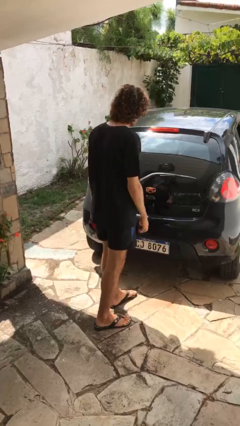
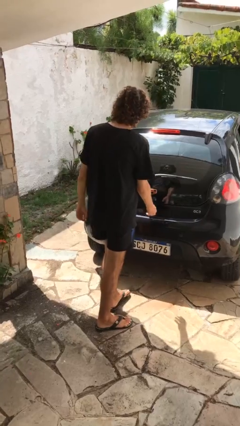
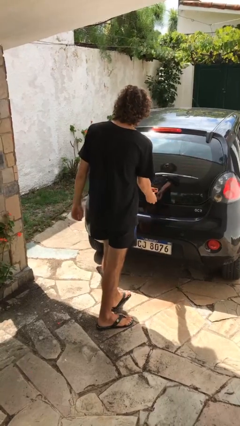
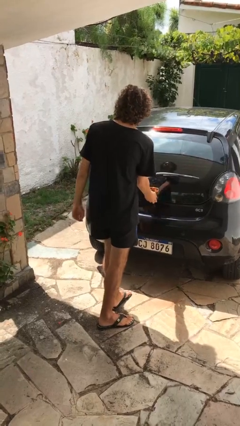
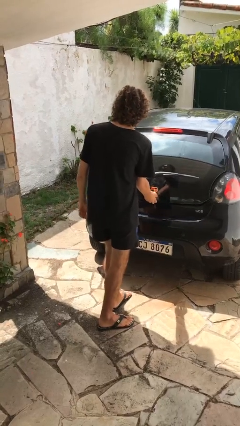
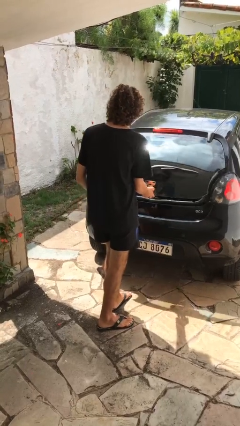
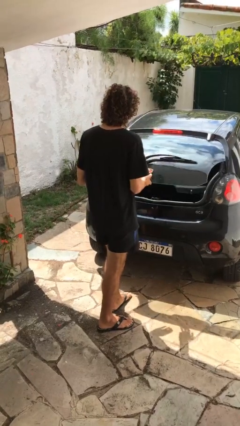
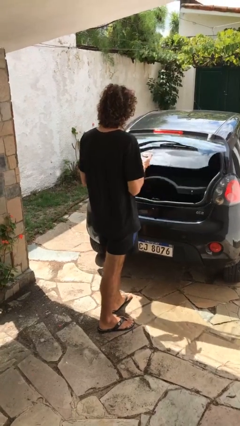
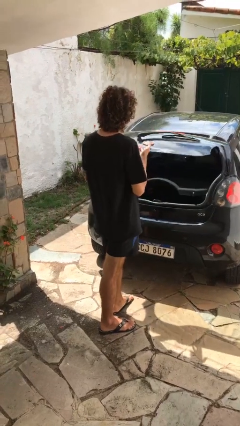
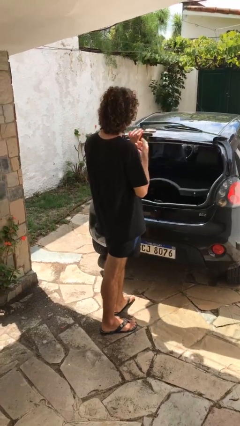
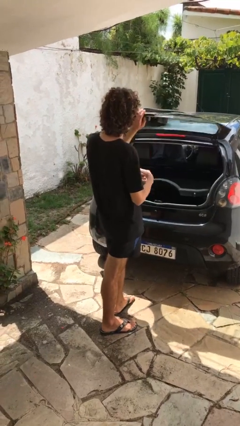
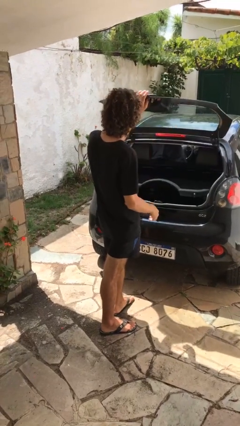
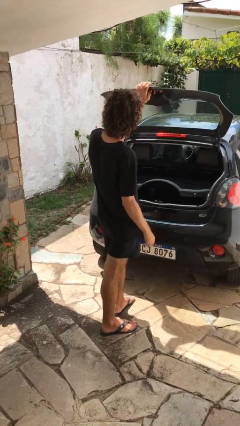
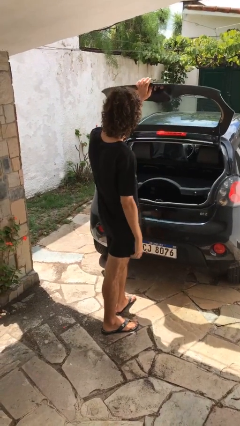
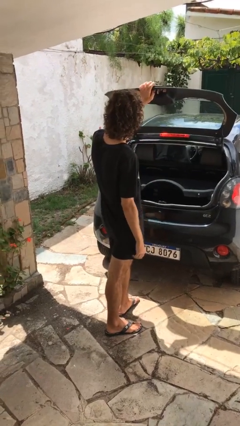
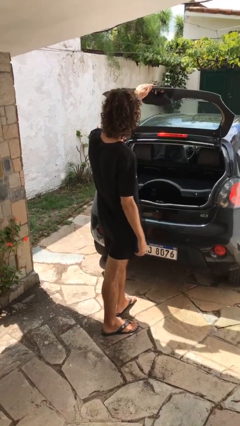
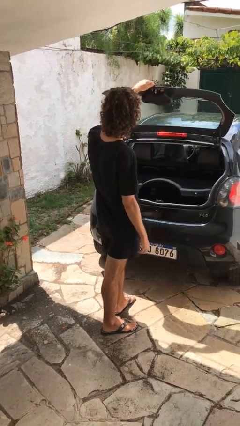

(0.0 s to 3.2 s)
person opens car trunk

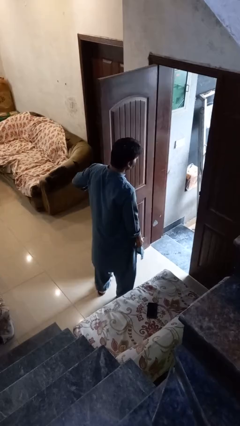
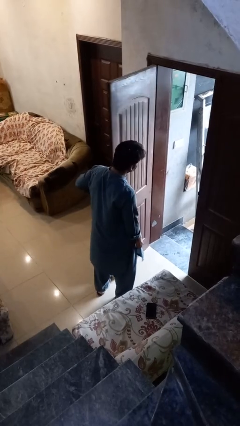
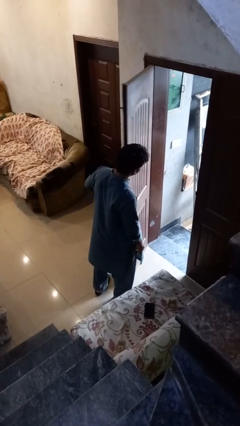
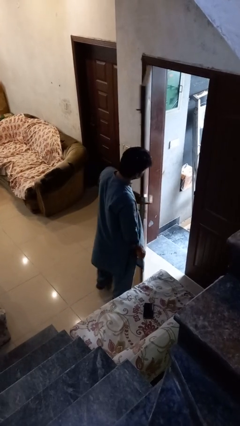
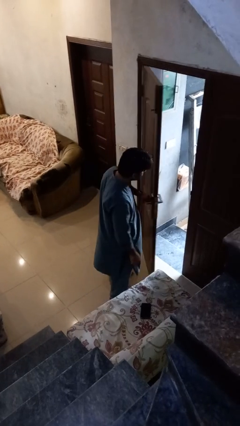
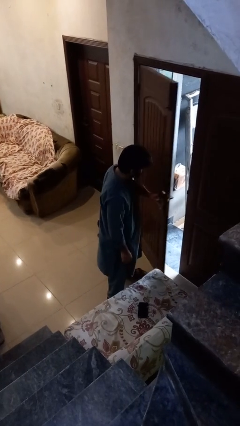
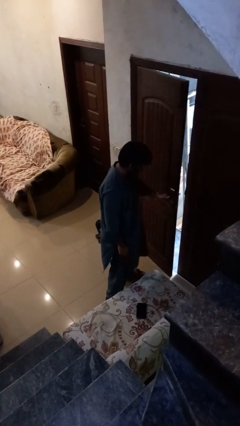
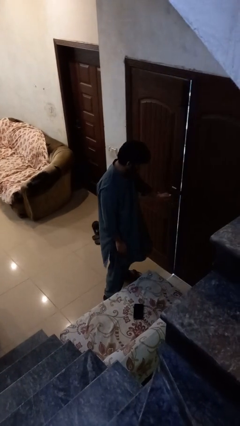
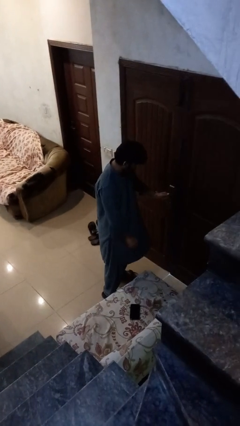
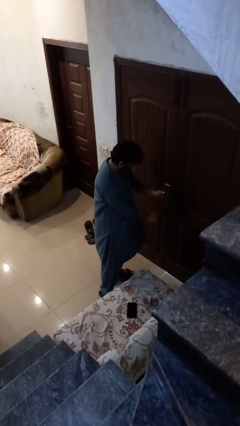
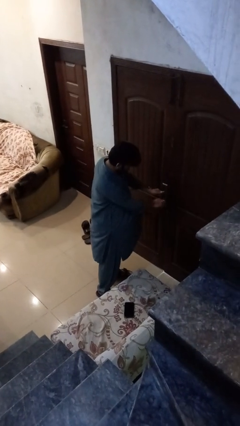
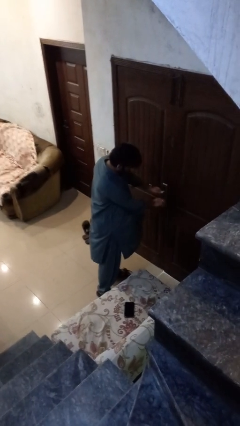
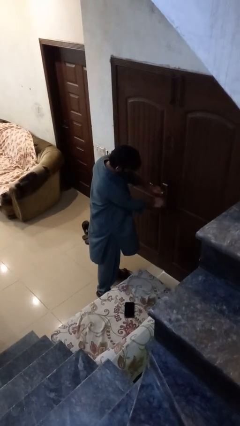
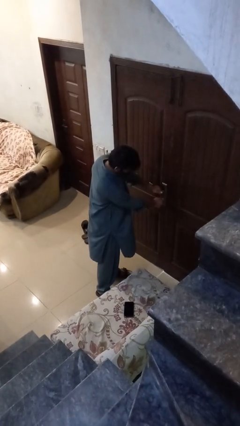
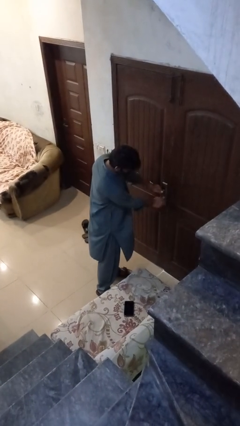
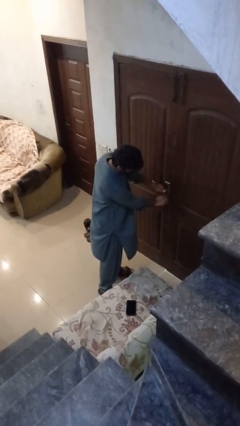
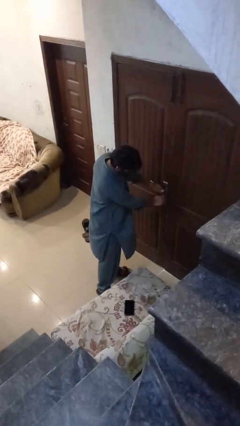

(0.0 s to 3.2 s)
person closes facility door

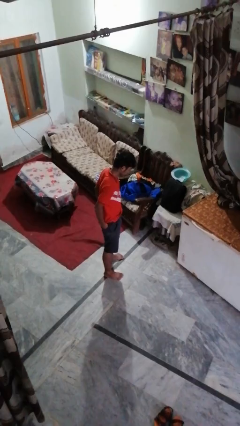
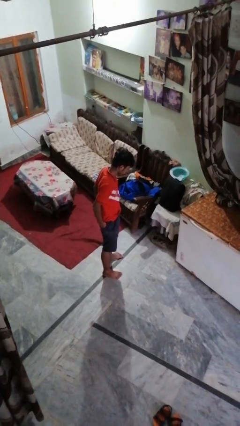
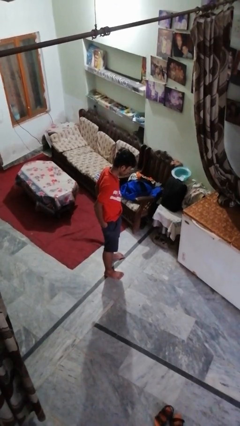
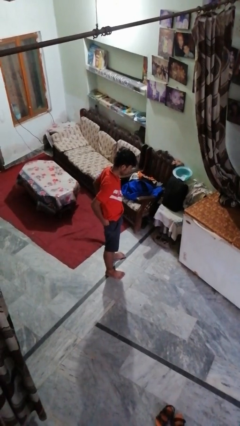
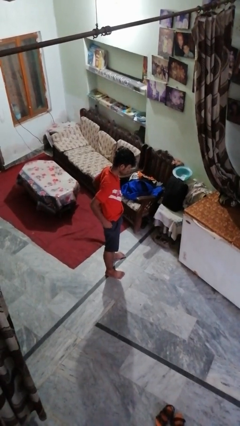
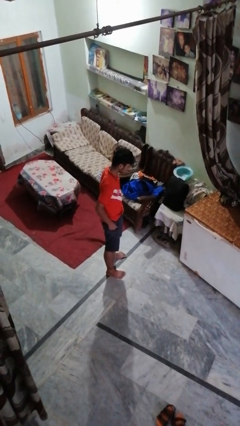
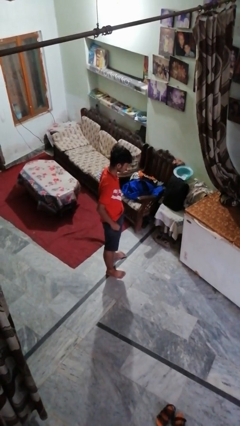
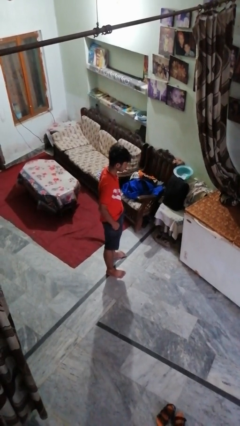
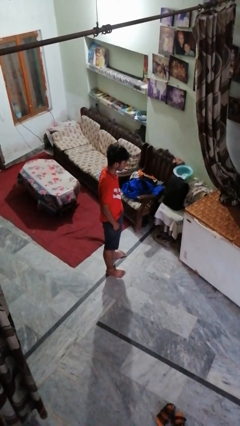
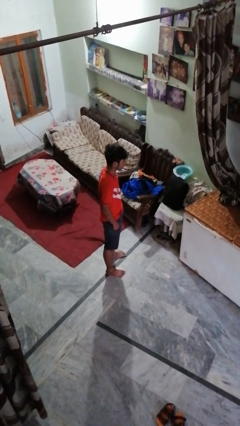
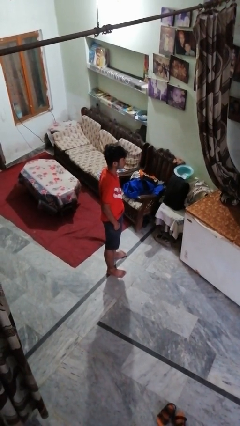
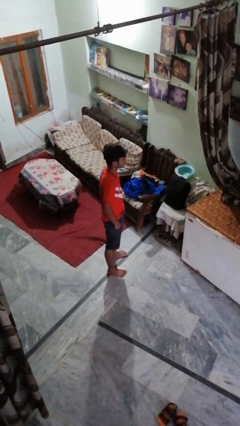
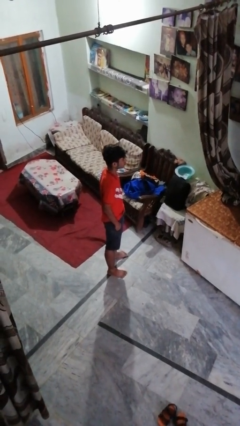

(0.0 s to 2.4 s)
person puts hands in back pockets

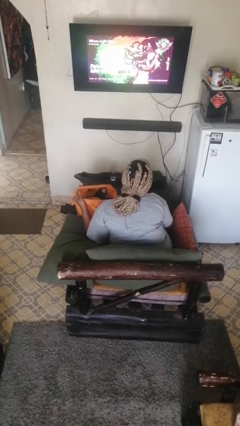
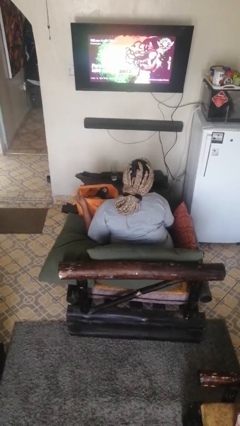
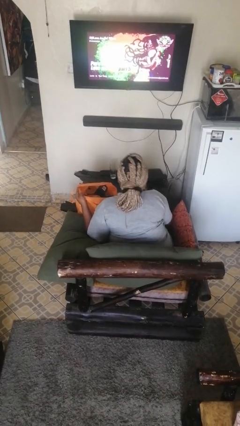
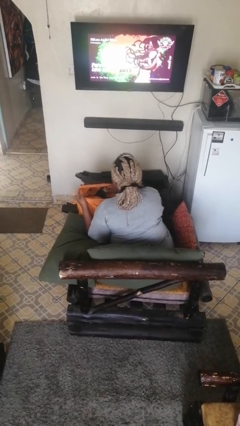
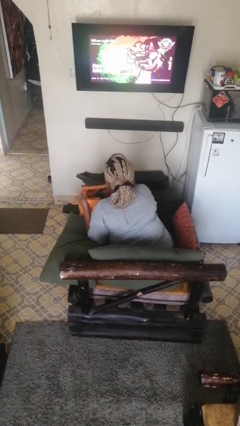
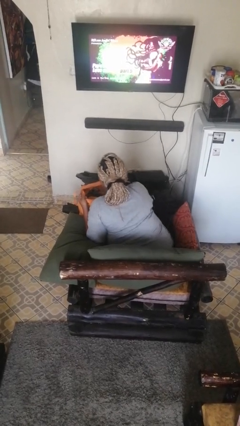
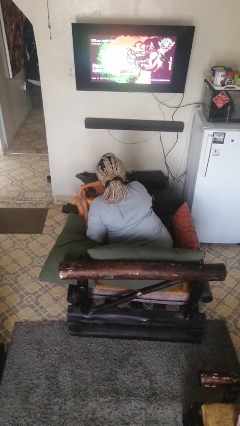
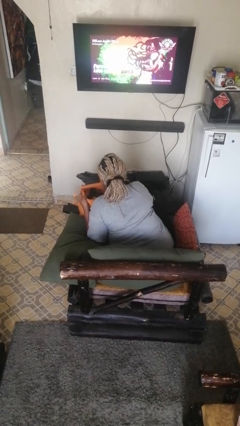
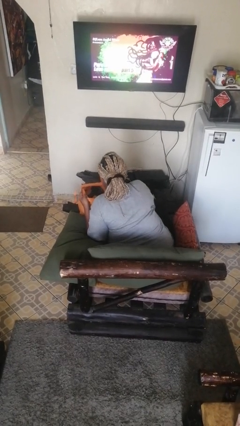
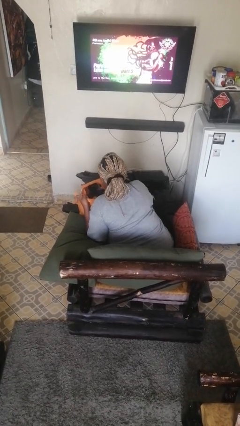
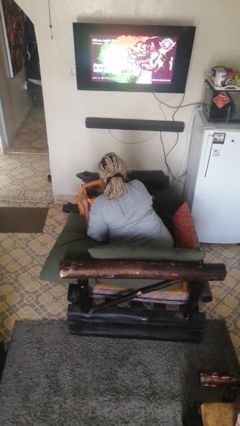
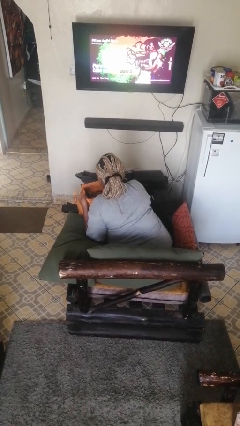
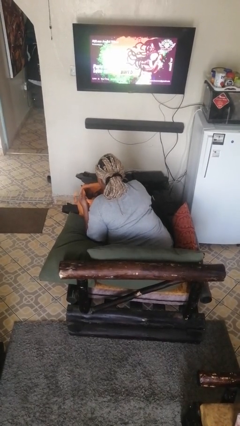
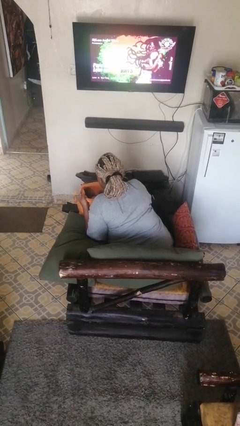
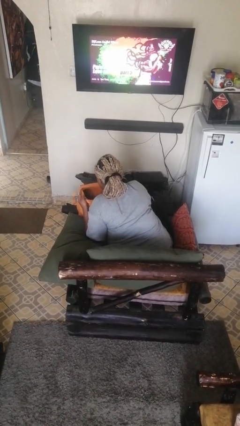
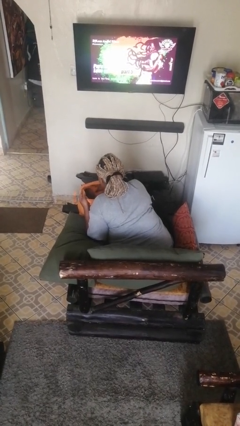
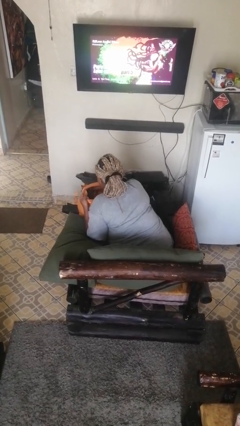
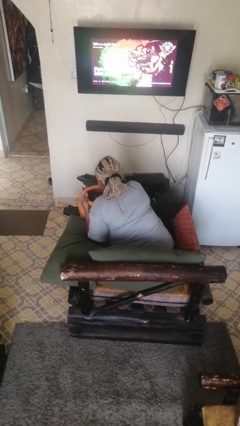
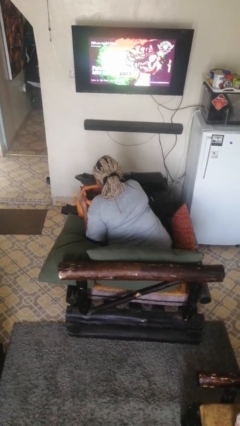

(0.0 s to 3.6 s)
person searches in bag

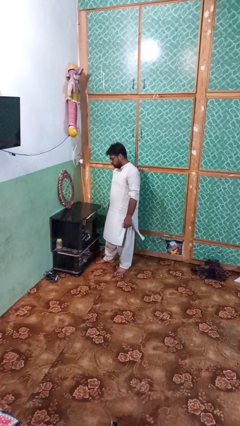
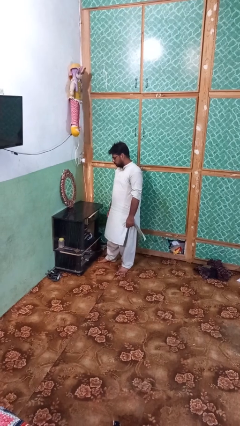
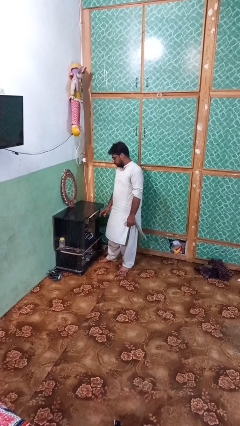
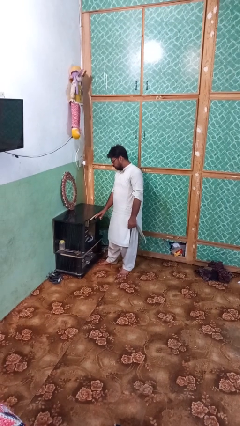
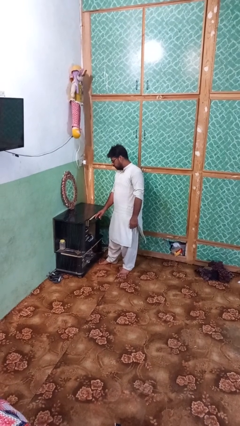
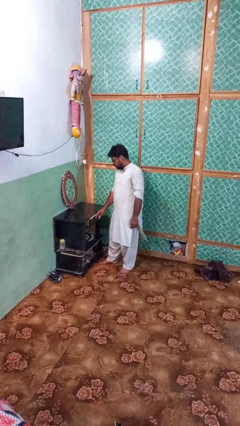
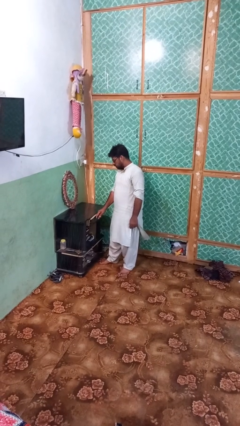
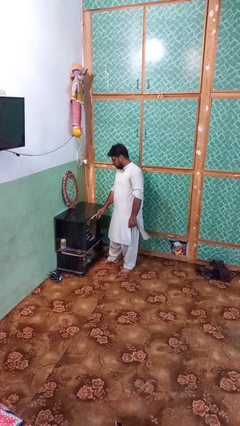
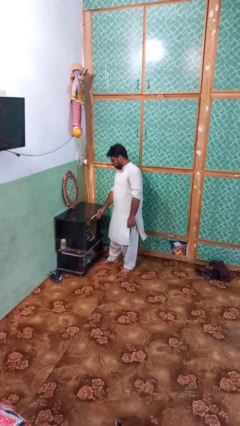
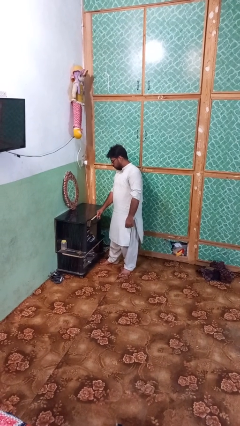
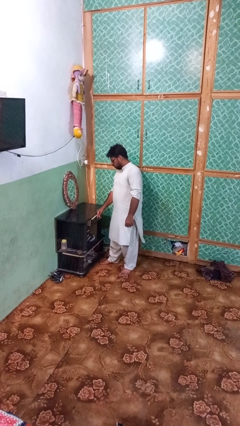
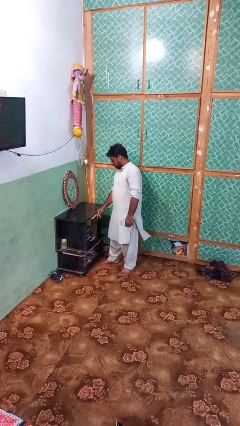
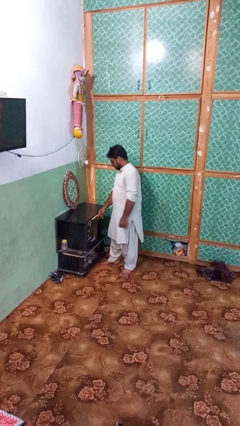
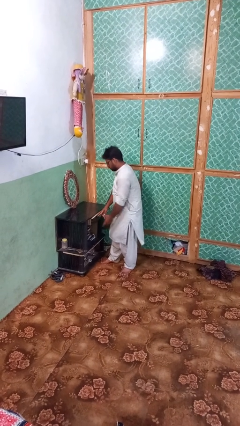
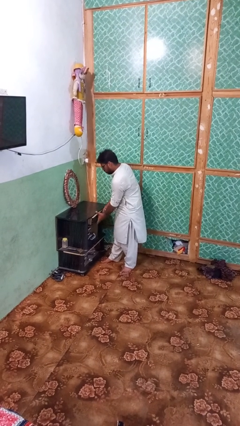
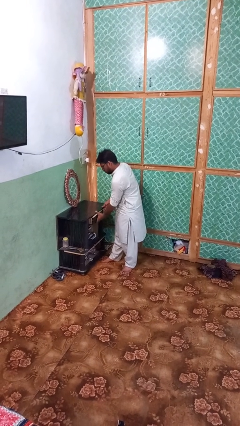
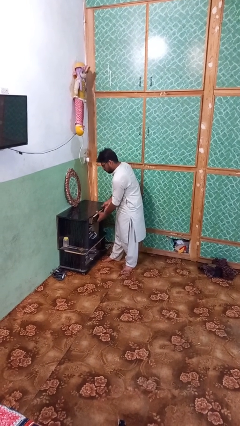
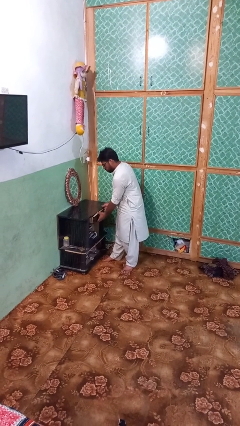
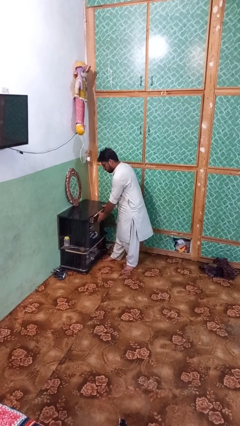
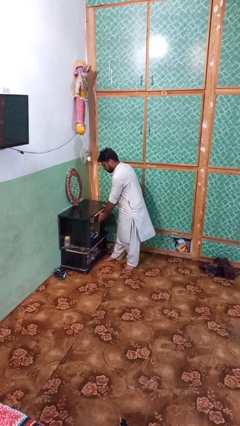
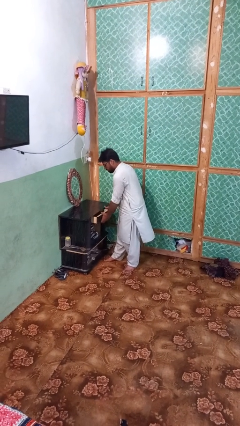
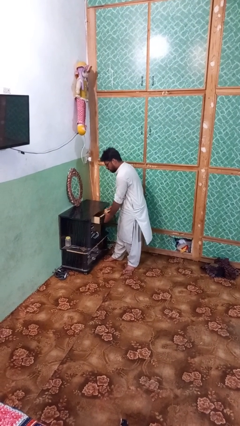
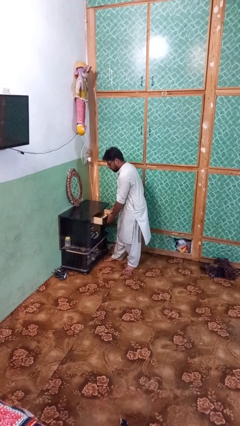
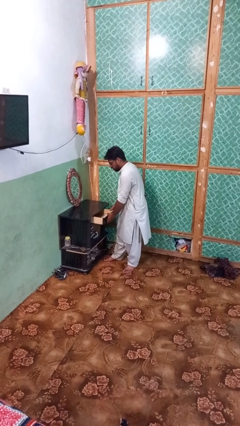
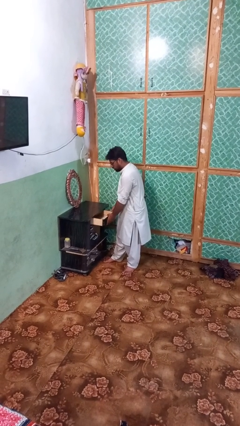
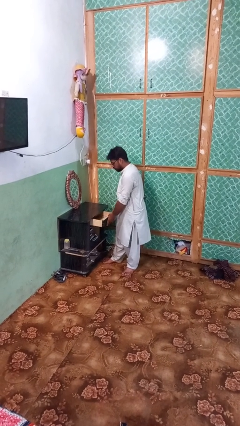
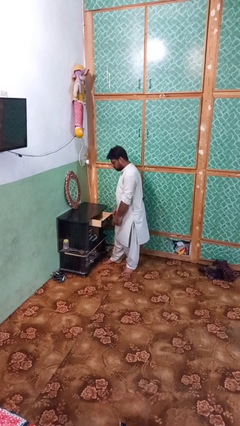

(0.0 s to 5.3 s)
person opens dresser drawer
